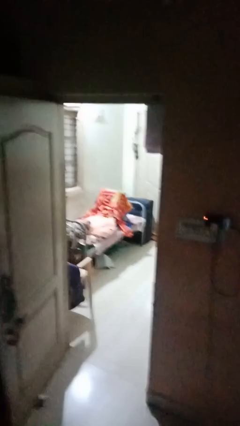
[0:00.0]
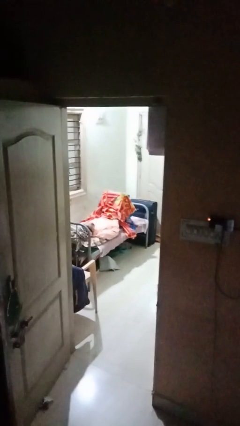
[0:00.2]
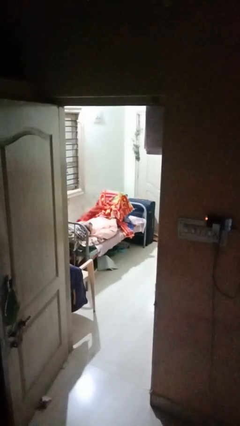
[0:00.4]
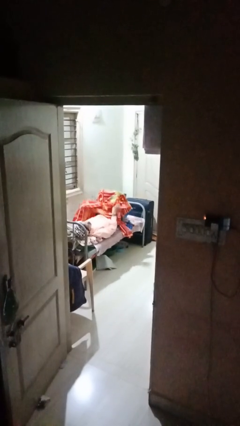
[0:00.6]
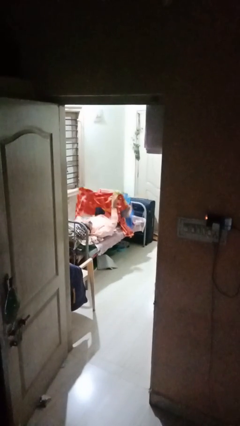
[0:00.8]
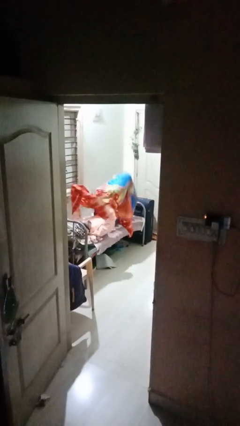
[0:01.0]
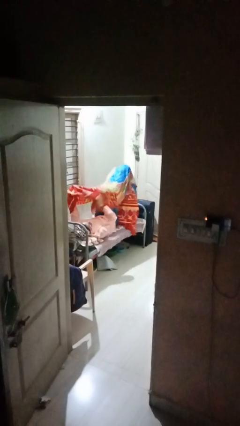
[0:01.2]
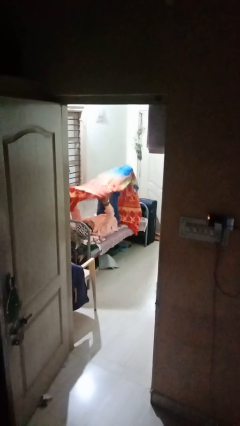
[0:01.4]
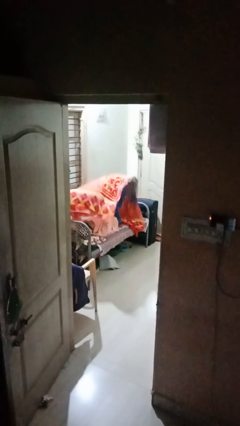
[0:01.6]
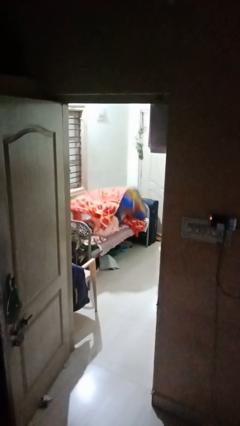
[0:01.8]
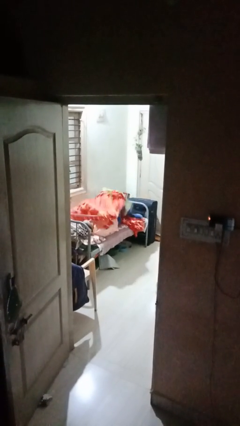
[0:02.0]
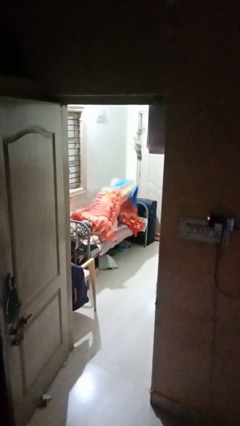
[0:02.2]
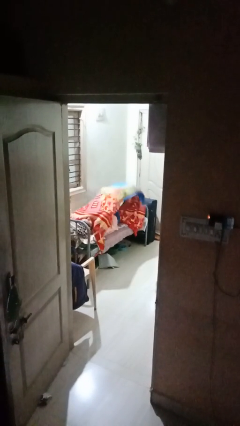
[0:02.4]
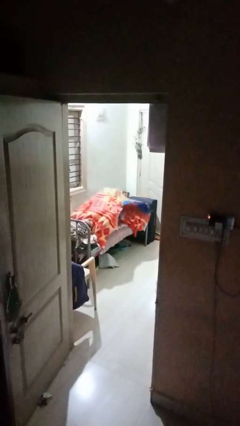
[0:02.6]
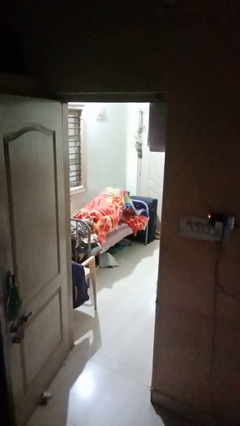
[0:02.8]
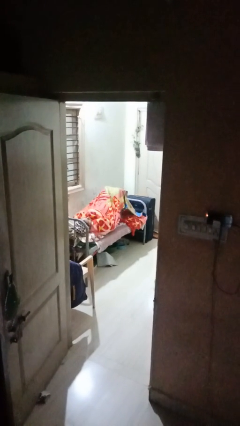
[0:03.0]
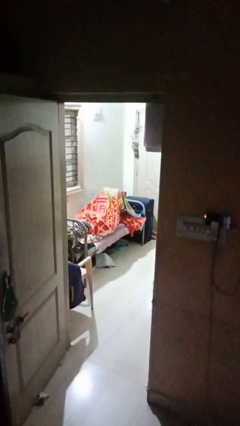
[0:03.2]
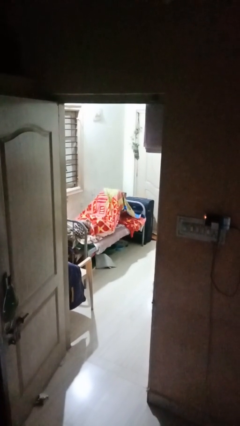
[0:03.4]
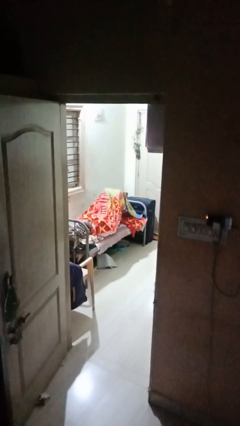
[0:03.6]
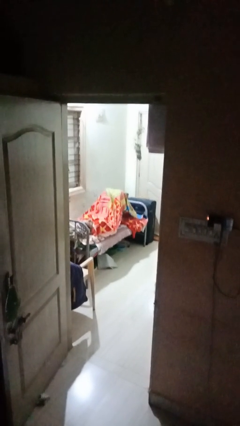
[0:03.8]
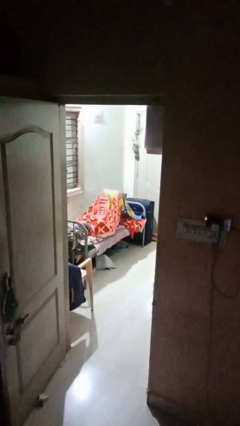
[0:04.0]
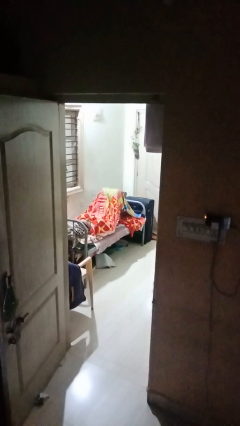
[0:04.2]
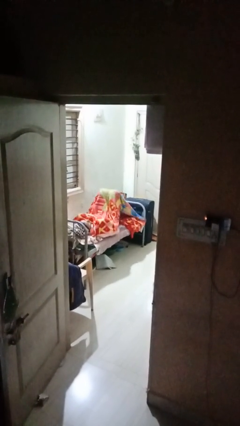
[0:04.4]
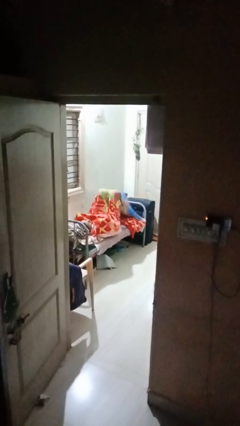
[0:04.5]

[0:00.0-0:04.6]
person covers with bedsheets

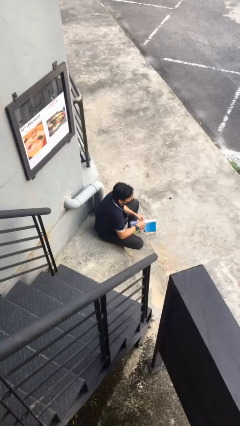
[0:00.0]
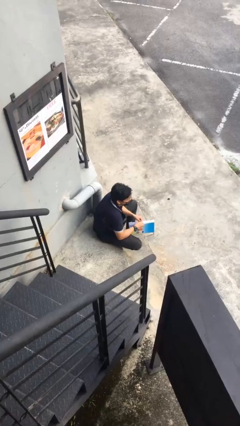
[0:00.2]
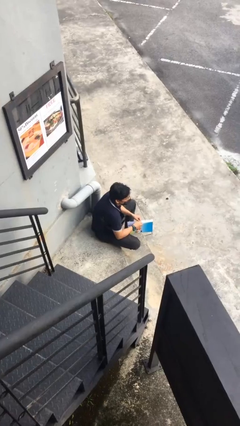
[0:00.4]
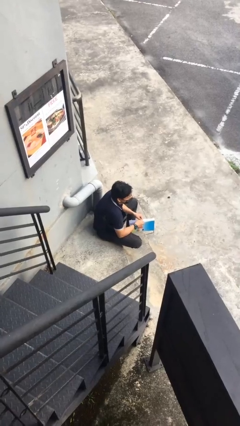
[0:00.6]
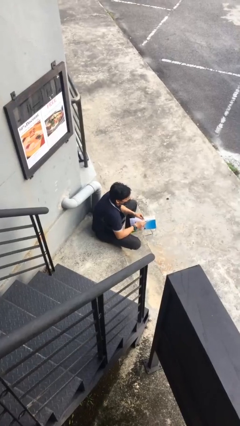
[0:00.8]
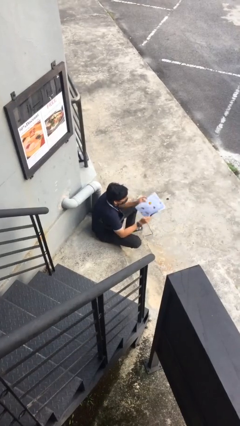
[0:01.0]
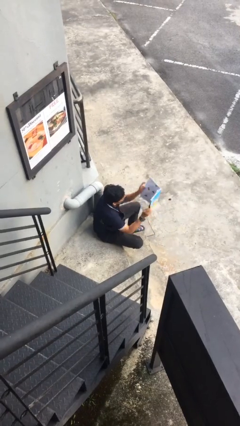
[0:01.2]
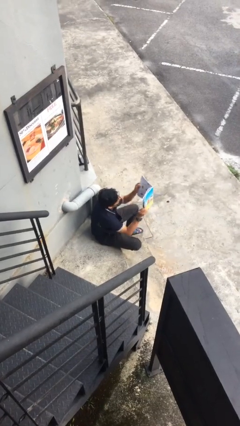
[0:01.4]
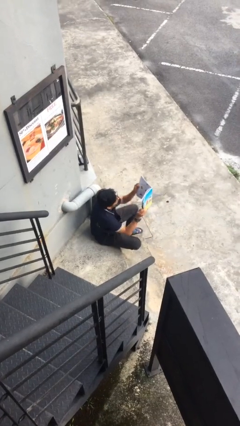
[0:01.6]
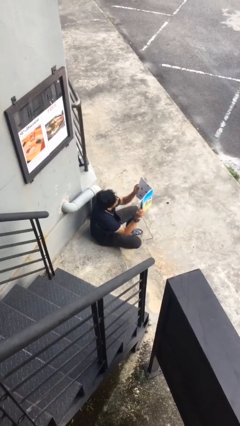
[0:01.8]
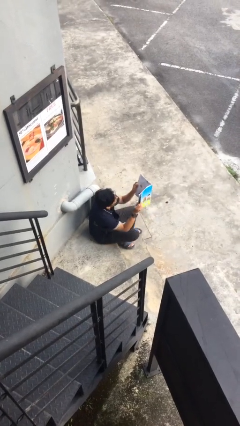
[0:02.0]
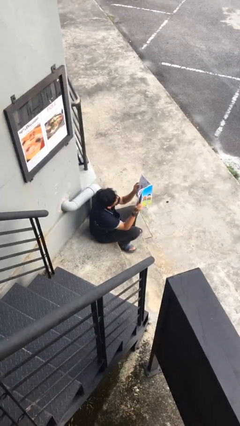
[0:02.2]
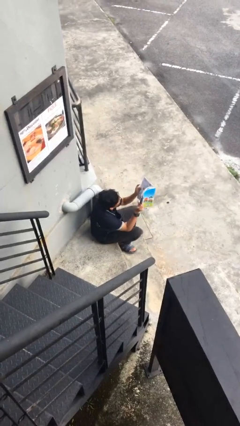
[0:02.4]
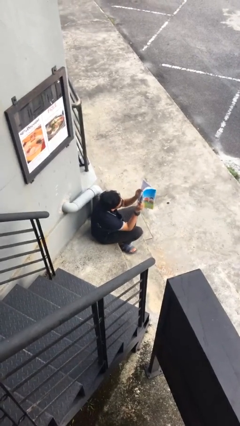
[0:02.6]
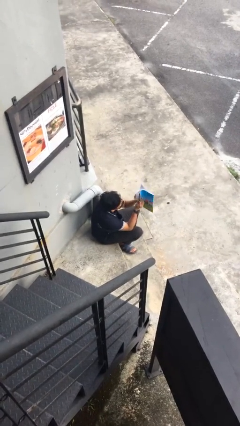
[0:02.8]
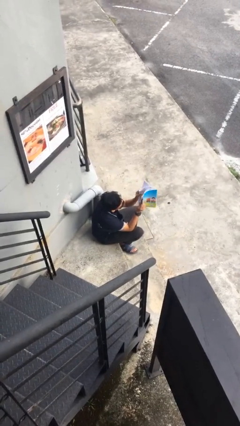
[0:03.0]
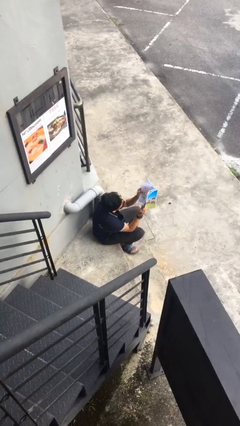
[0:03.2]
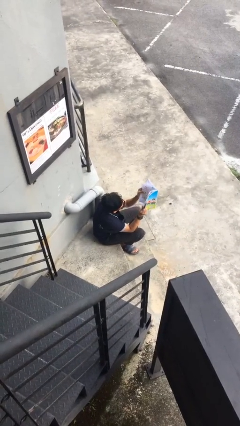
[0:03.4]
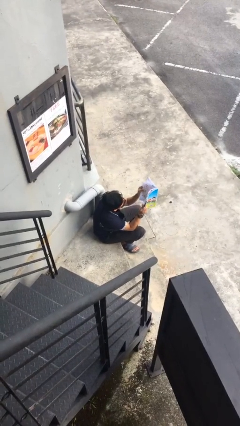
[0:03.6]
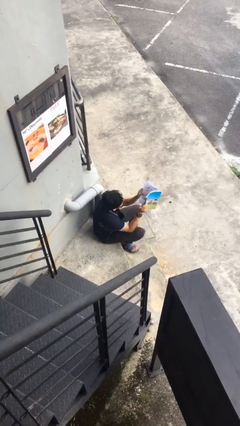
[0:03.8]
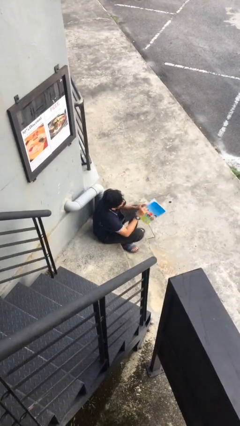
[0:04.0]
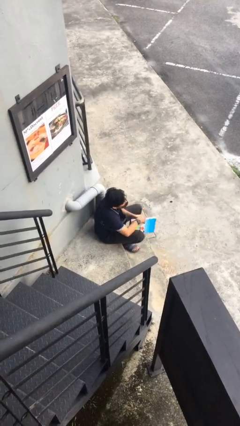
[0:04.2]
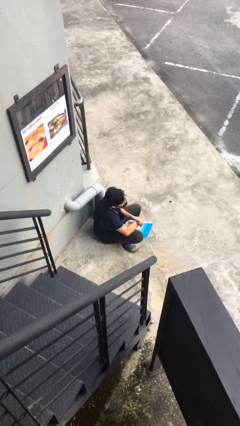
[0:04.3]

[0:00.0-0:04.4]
person reads document

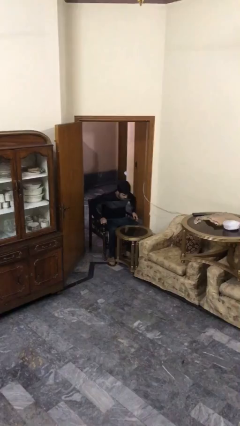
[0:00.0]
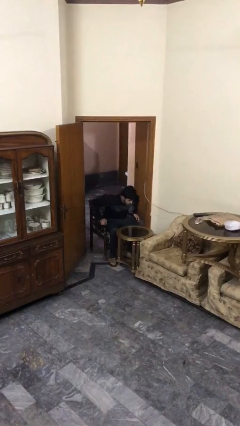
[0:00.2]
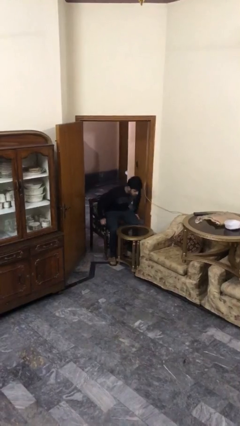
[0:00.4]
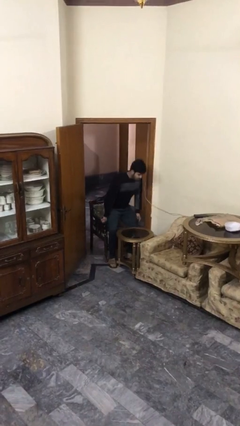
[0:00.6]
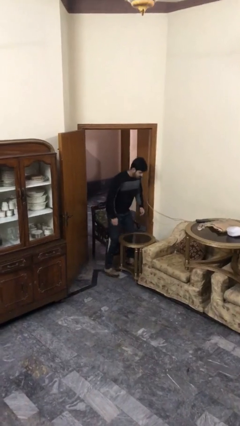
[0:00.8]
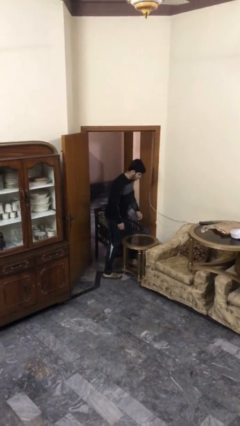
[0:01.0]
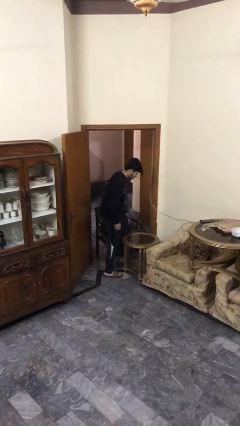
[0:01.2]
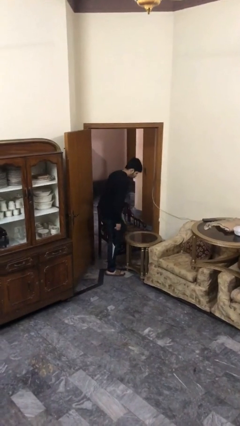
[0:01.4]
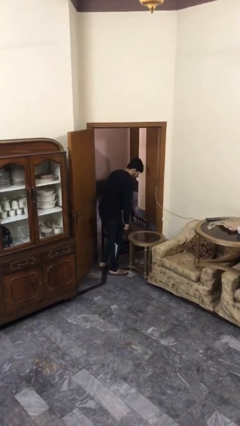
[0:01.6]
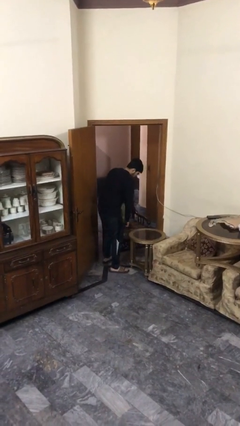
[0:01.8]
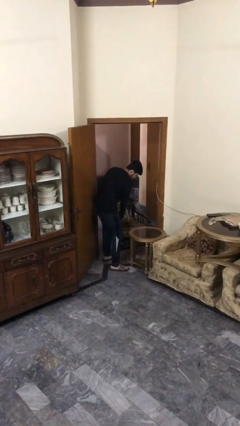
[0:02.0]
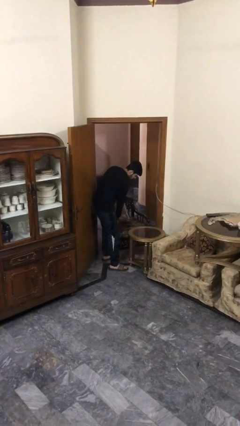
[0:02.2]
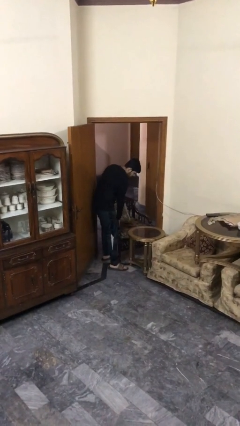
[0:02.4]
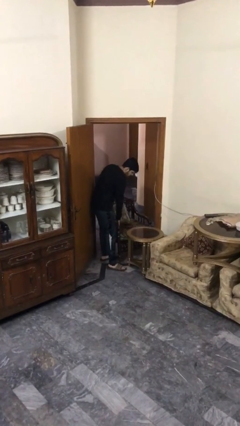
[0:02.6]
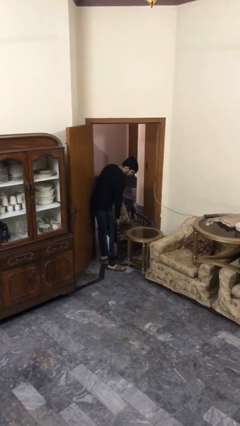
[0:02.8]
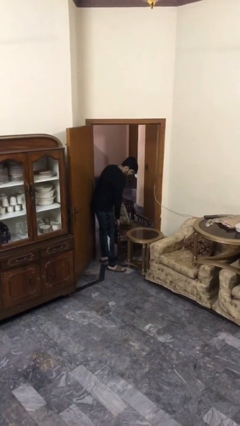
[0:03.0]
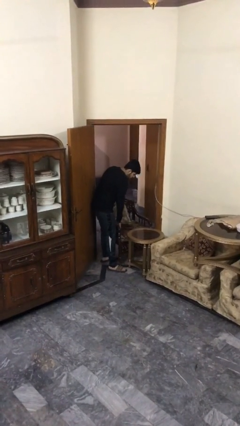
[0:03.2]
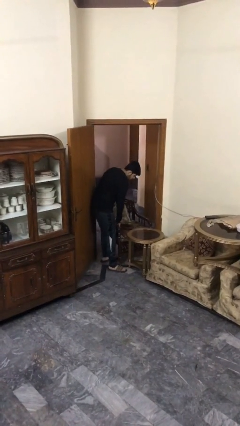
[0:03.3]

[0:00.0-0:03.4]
person stands up

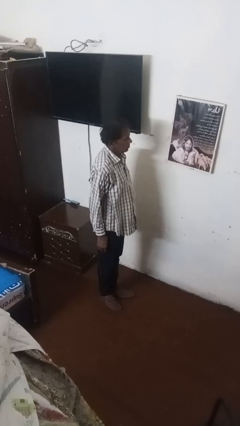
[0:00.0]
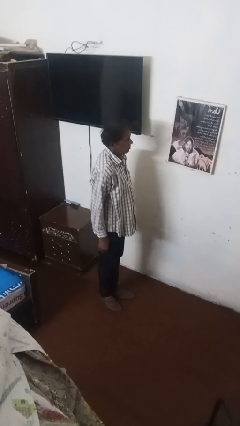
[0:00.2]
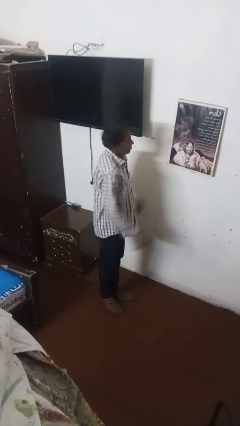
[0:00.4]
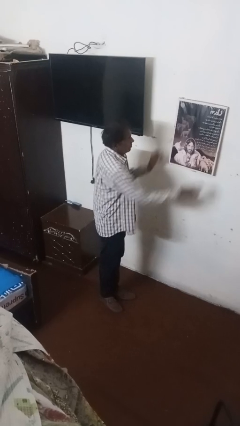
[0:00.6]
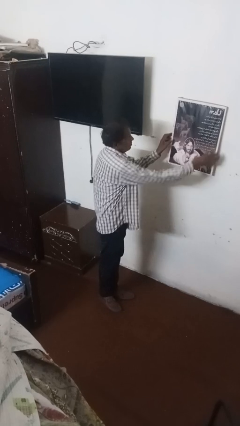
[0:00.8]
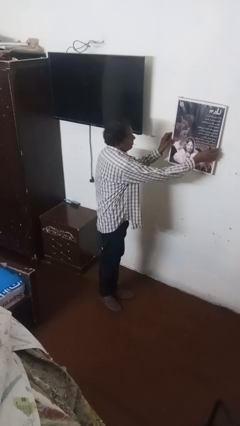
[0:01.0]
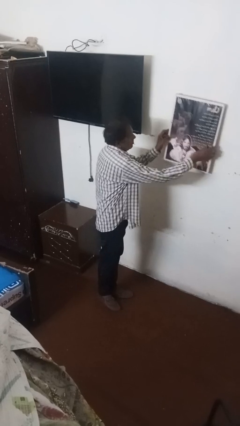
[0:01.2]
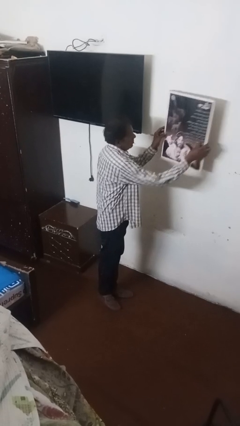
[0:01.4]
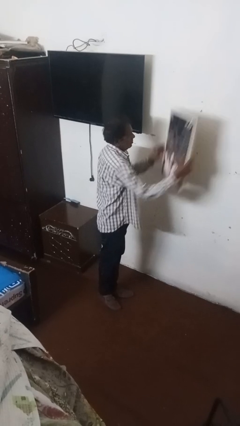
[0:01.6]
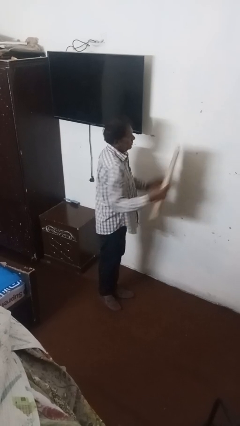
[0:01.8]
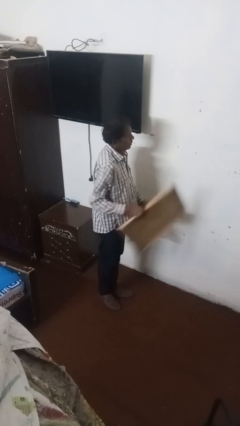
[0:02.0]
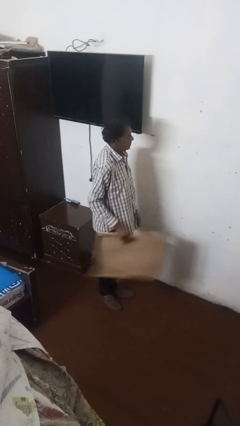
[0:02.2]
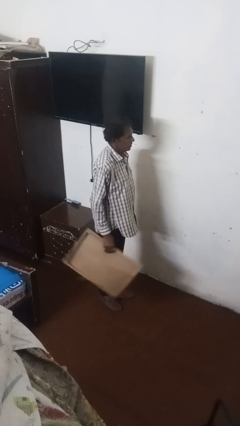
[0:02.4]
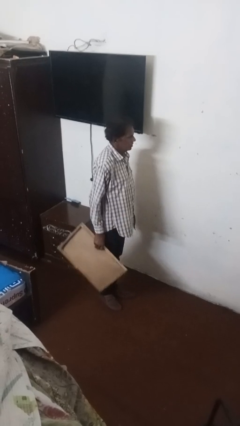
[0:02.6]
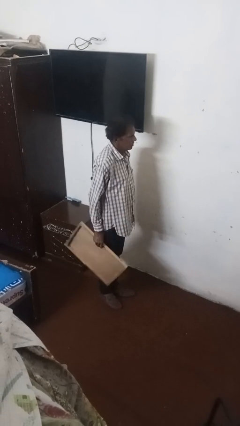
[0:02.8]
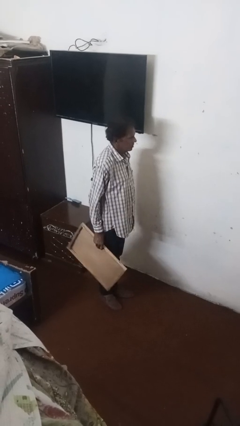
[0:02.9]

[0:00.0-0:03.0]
person takes down picture frame

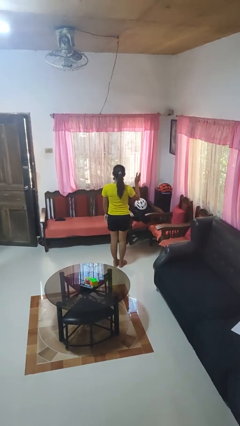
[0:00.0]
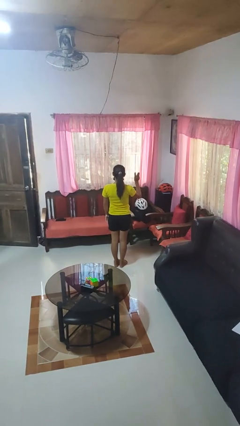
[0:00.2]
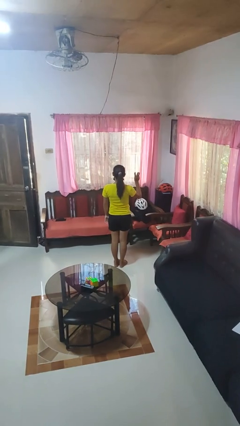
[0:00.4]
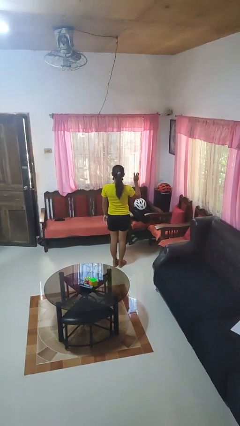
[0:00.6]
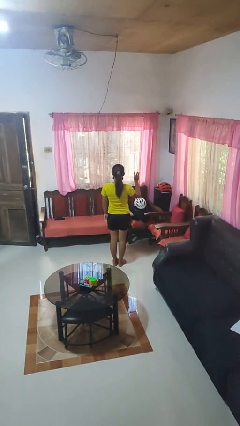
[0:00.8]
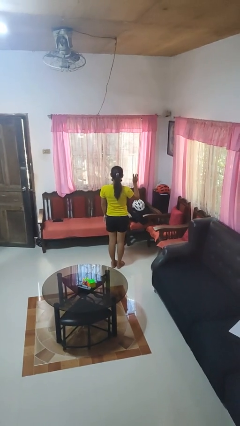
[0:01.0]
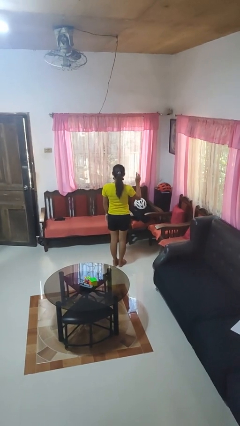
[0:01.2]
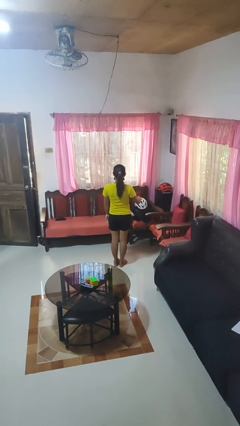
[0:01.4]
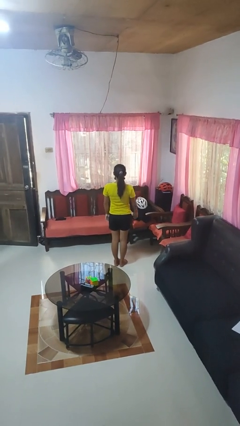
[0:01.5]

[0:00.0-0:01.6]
person gestures number three

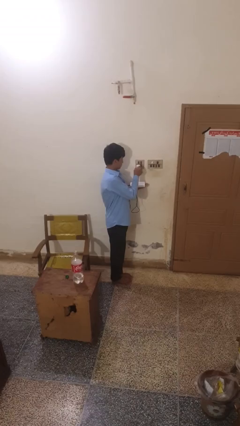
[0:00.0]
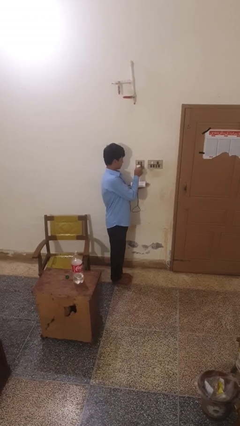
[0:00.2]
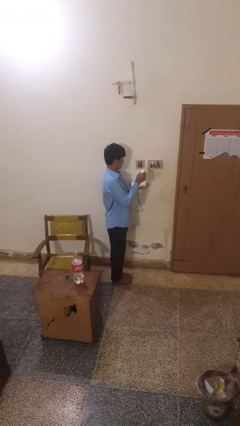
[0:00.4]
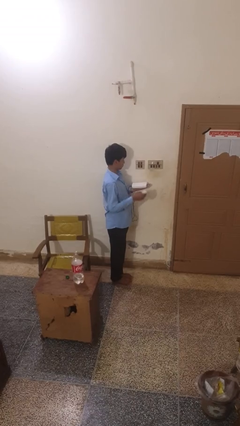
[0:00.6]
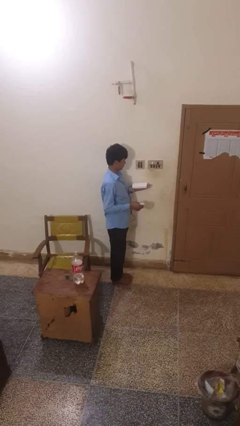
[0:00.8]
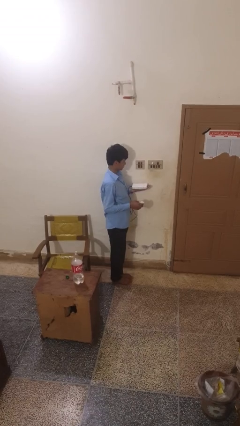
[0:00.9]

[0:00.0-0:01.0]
person unplugs from electrical socket
